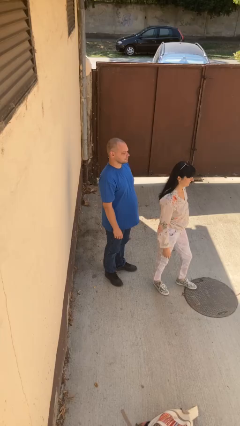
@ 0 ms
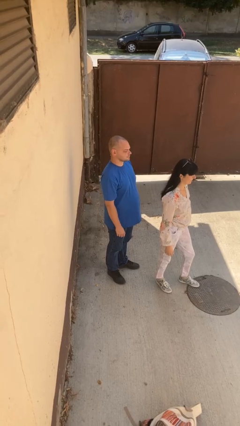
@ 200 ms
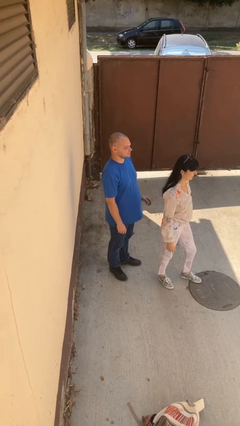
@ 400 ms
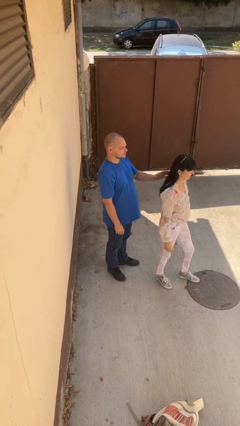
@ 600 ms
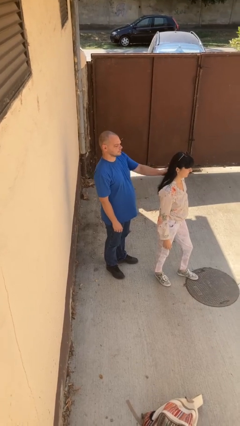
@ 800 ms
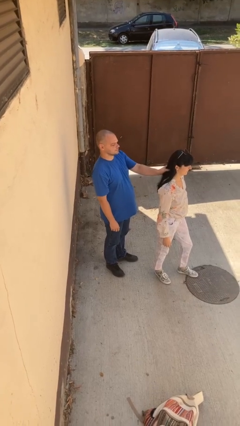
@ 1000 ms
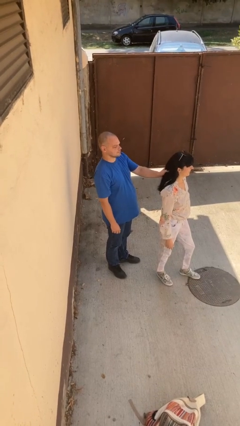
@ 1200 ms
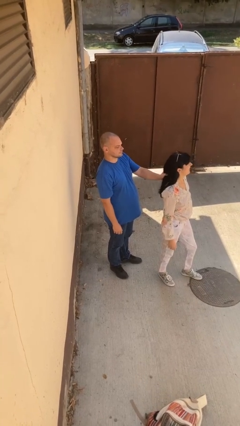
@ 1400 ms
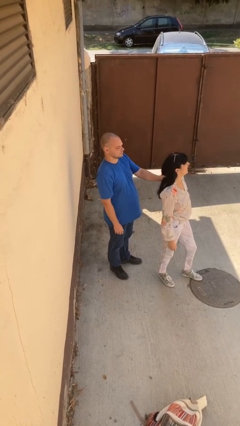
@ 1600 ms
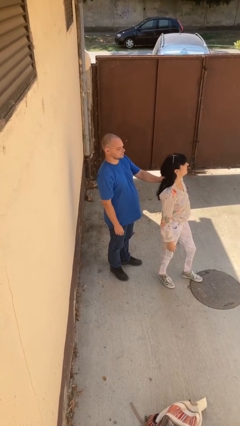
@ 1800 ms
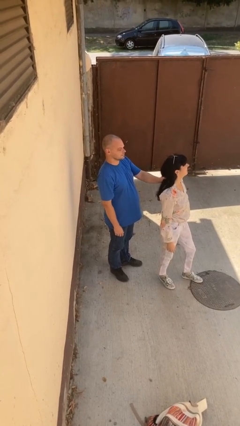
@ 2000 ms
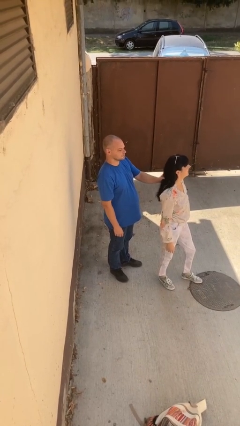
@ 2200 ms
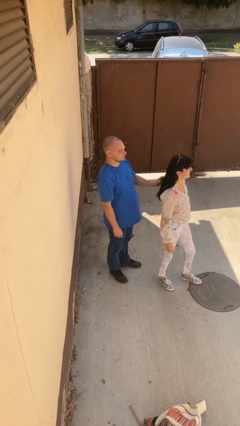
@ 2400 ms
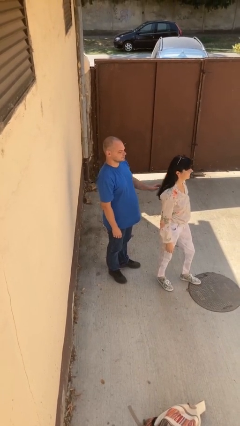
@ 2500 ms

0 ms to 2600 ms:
person grabs person by hair

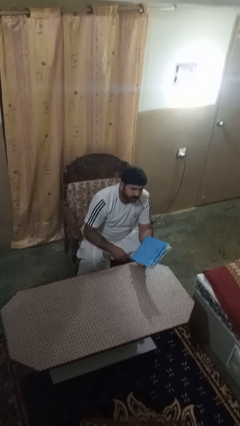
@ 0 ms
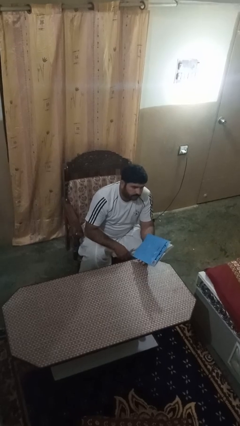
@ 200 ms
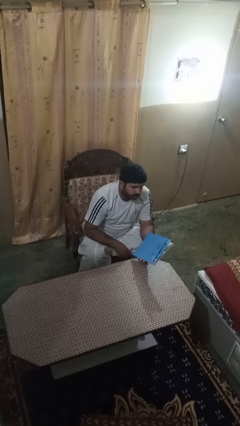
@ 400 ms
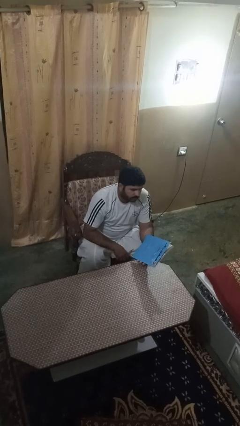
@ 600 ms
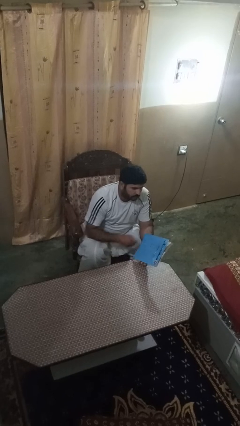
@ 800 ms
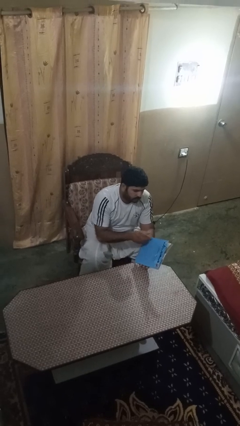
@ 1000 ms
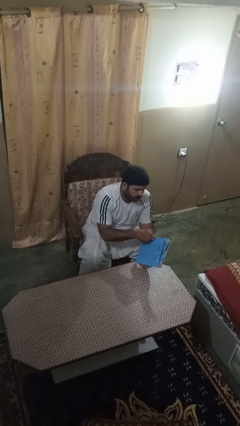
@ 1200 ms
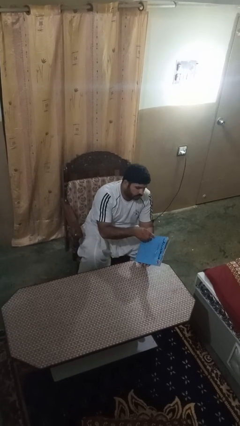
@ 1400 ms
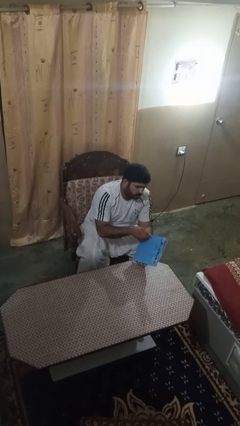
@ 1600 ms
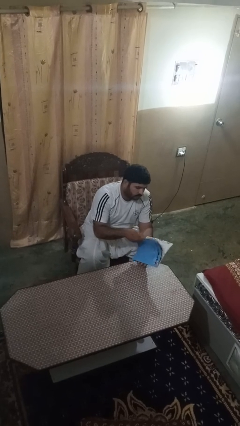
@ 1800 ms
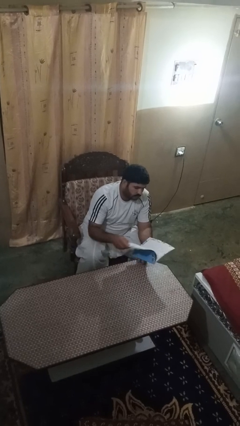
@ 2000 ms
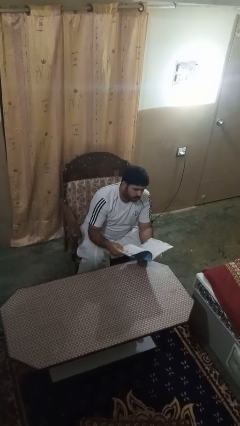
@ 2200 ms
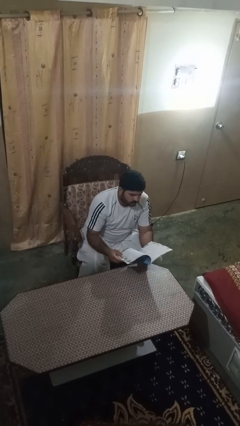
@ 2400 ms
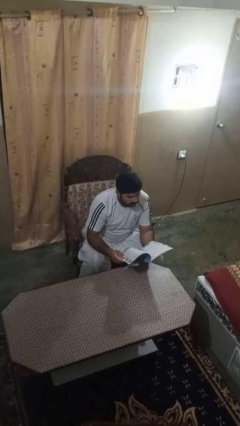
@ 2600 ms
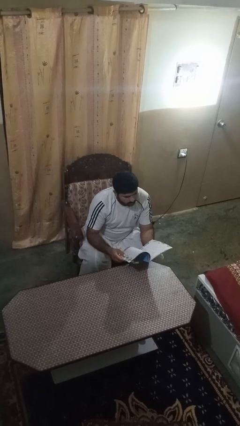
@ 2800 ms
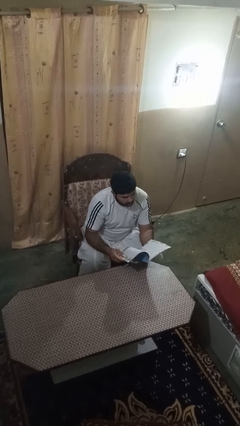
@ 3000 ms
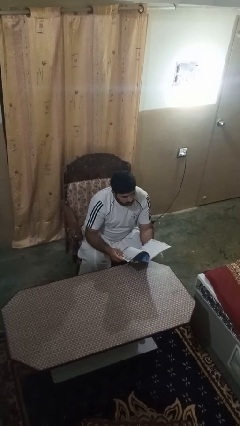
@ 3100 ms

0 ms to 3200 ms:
person reads magazine

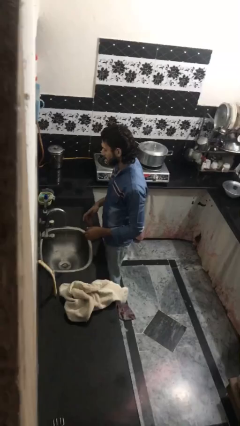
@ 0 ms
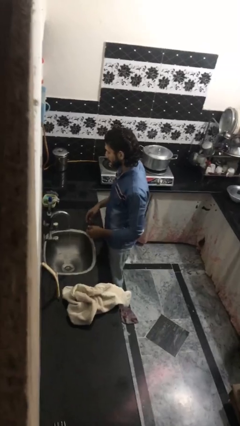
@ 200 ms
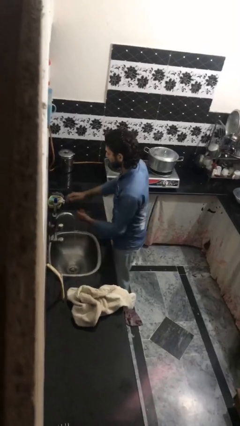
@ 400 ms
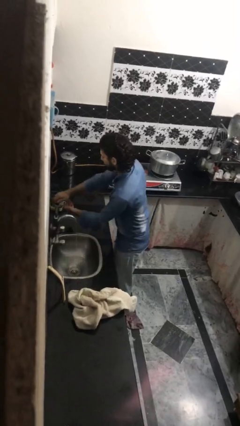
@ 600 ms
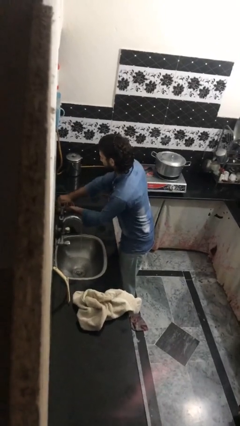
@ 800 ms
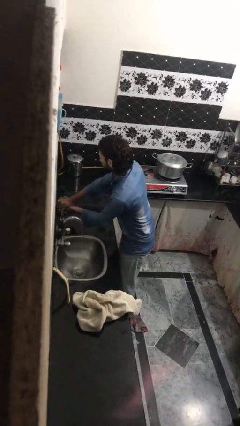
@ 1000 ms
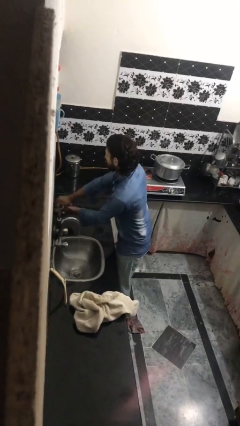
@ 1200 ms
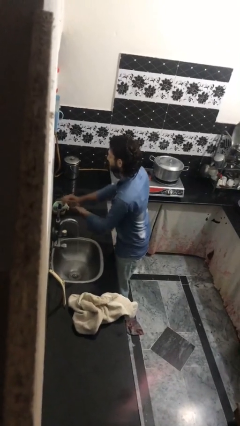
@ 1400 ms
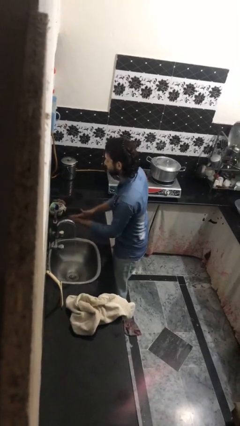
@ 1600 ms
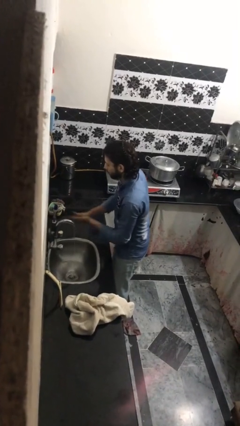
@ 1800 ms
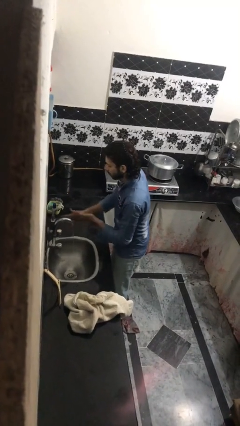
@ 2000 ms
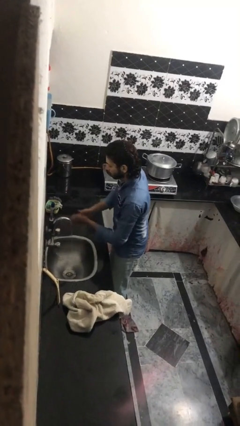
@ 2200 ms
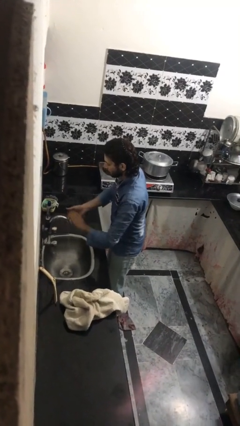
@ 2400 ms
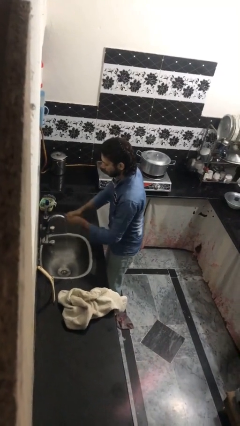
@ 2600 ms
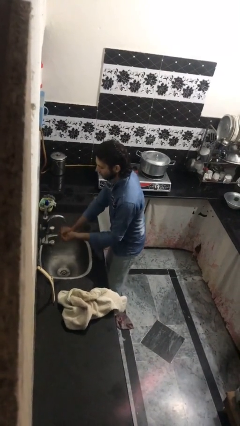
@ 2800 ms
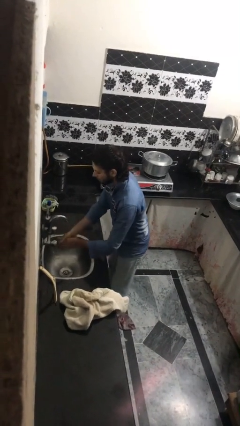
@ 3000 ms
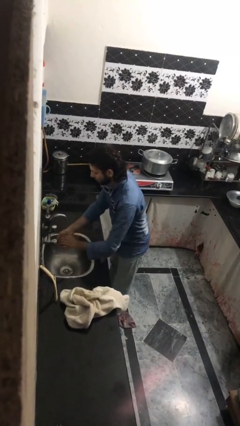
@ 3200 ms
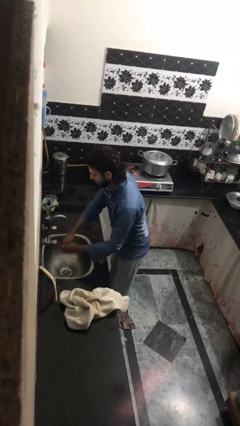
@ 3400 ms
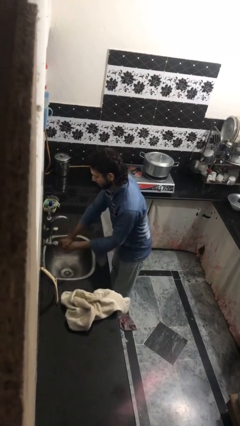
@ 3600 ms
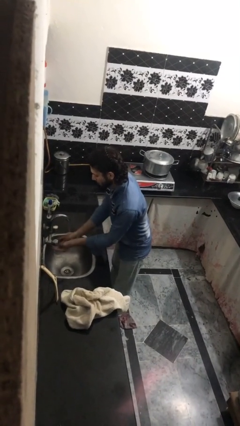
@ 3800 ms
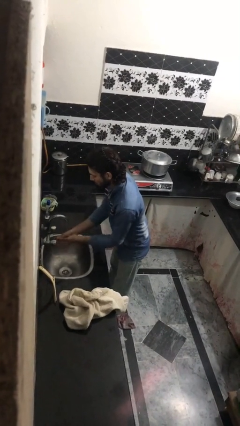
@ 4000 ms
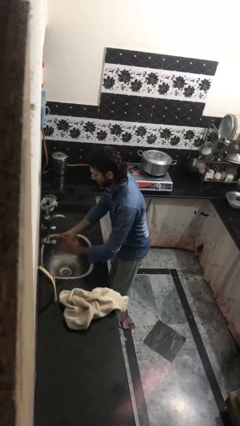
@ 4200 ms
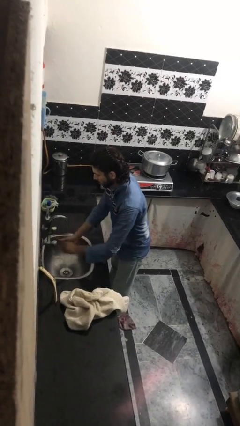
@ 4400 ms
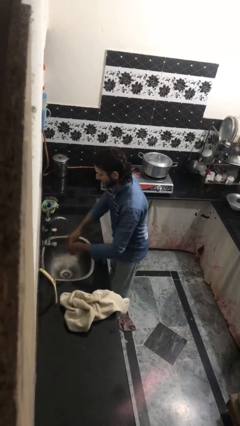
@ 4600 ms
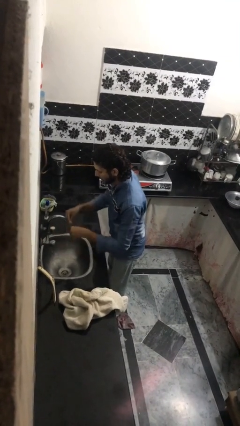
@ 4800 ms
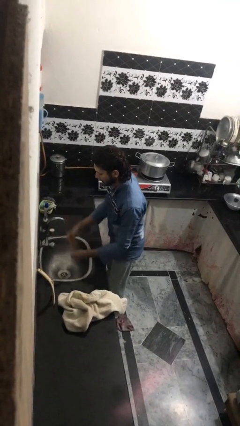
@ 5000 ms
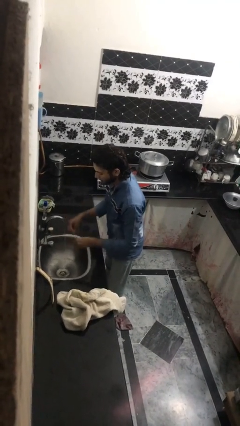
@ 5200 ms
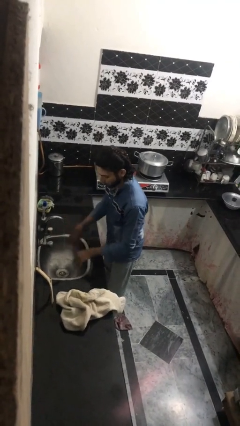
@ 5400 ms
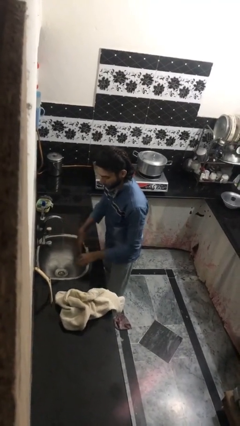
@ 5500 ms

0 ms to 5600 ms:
person washes hands

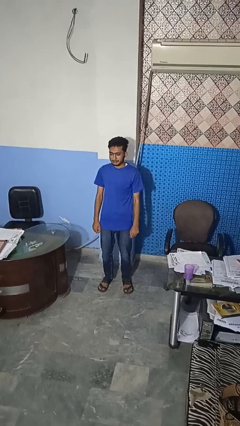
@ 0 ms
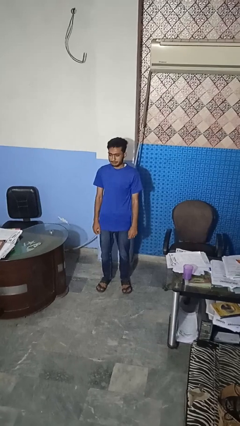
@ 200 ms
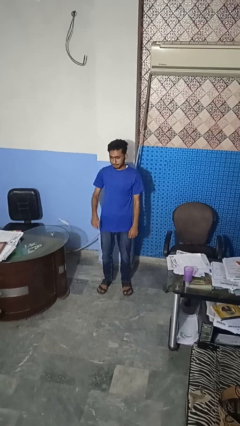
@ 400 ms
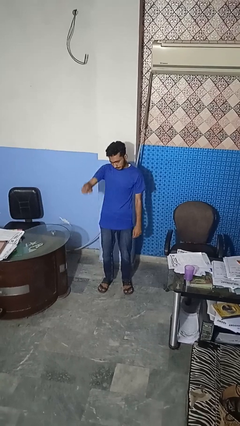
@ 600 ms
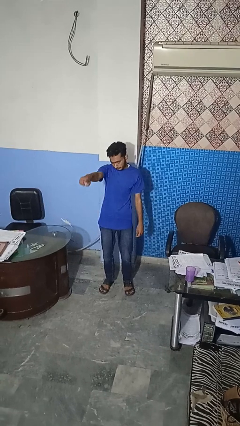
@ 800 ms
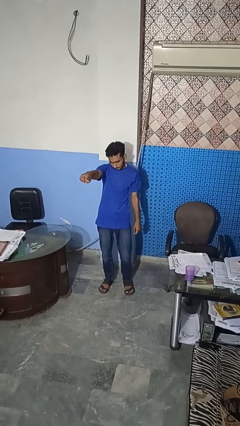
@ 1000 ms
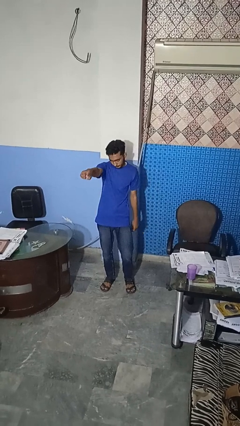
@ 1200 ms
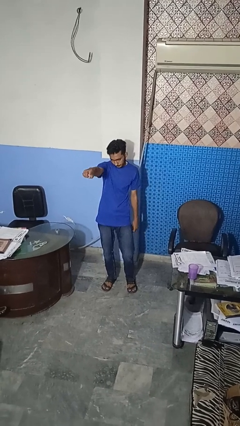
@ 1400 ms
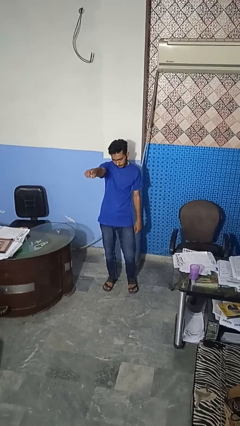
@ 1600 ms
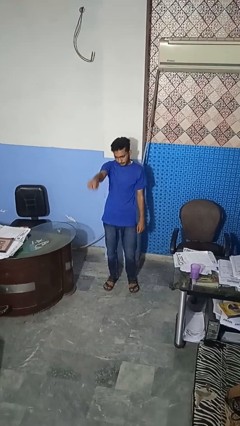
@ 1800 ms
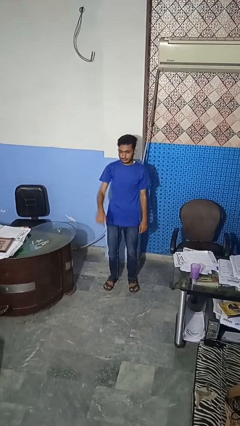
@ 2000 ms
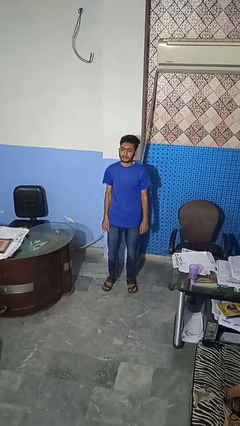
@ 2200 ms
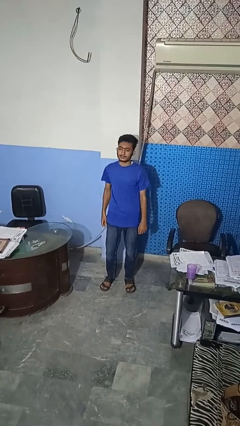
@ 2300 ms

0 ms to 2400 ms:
person points at person

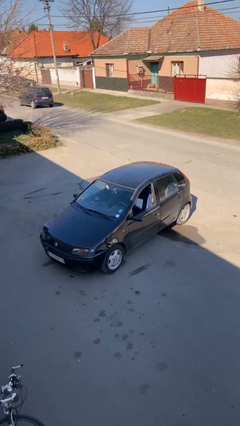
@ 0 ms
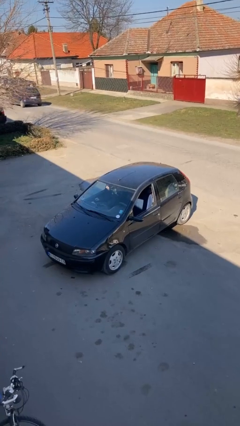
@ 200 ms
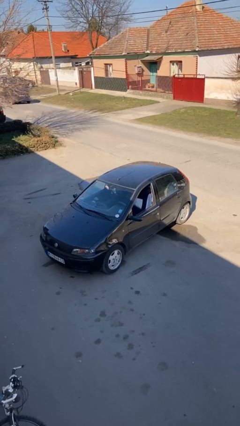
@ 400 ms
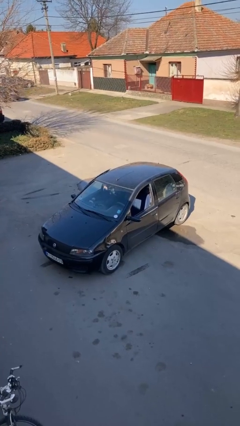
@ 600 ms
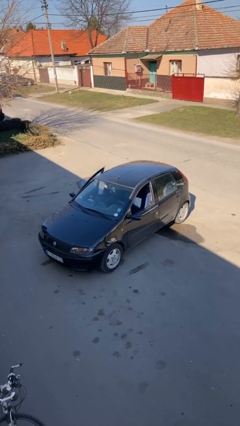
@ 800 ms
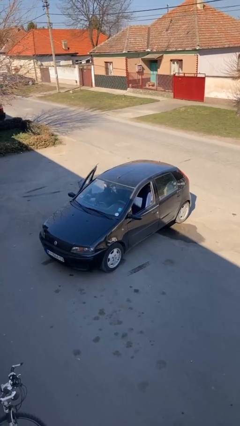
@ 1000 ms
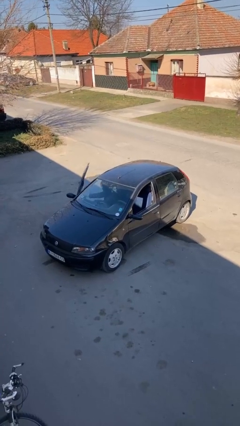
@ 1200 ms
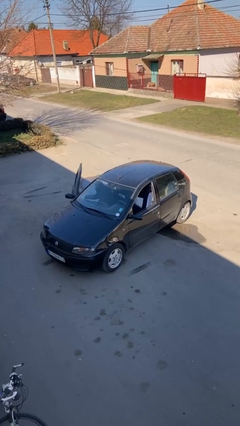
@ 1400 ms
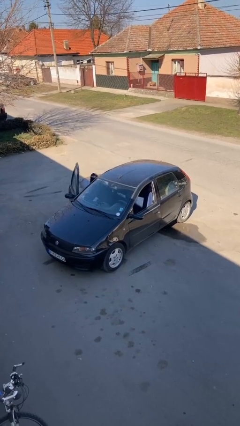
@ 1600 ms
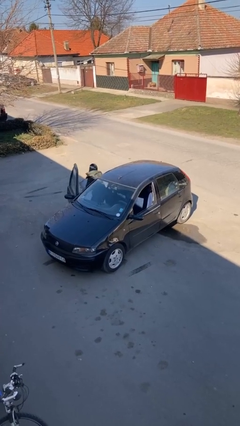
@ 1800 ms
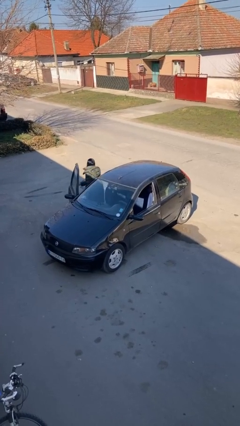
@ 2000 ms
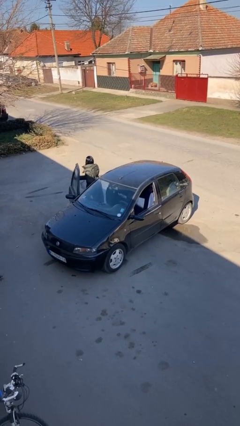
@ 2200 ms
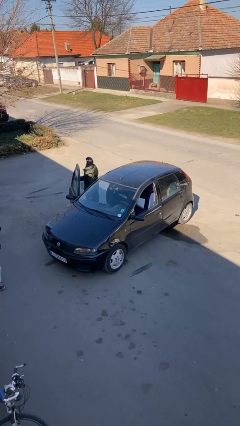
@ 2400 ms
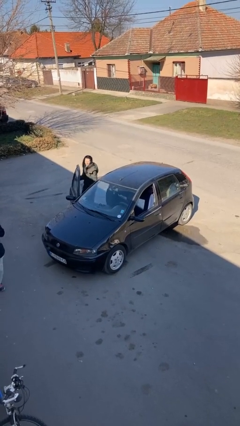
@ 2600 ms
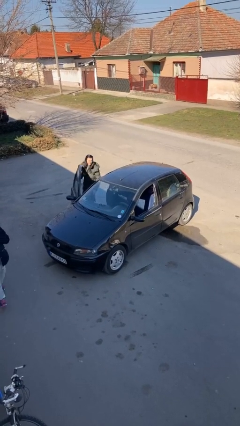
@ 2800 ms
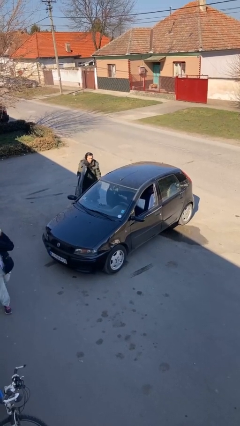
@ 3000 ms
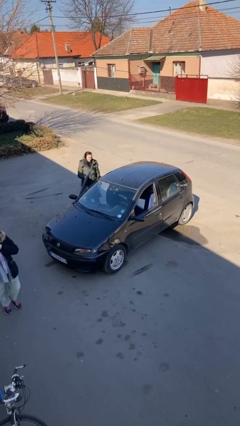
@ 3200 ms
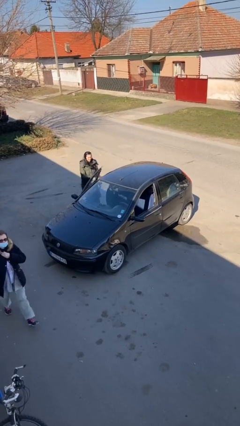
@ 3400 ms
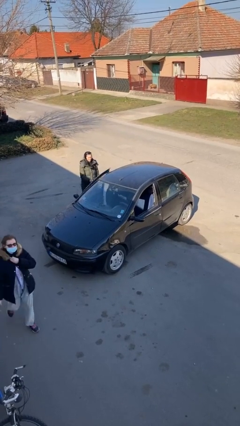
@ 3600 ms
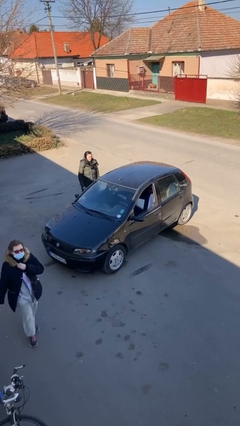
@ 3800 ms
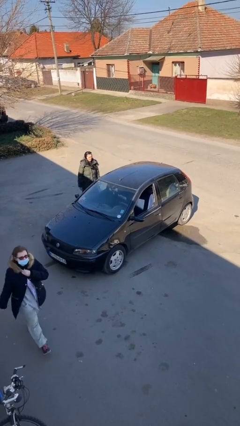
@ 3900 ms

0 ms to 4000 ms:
car drops off person
